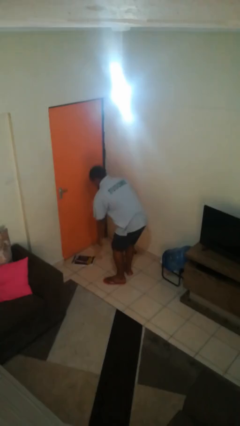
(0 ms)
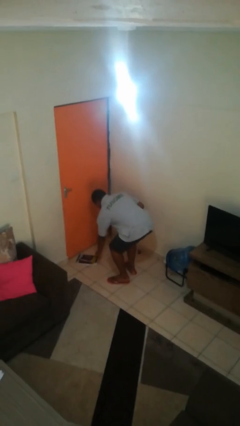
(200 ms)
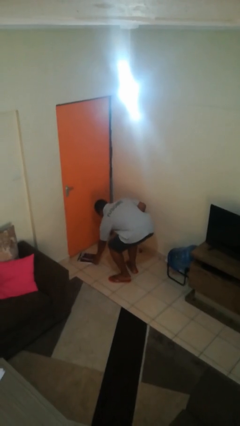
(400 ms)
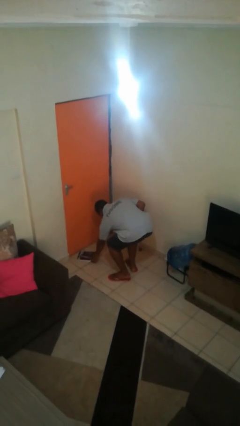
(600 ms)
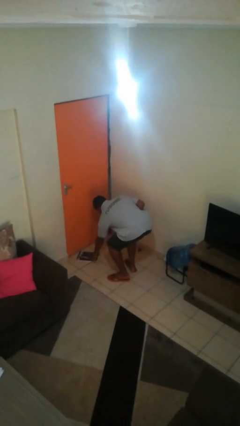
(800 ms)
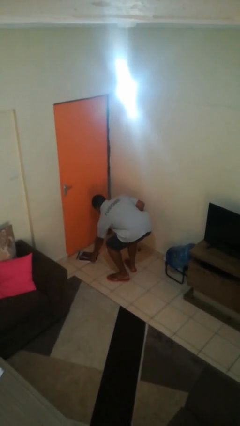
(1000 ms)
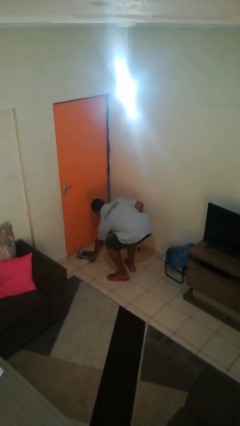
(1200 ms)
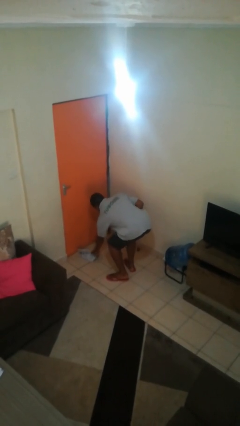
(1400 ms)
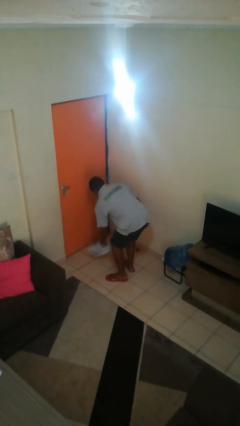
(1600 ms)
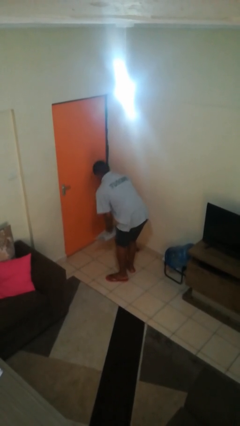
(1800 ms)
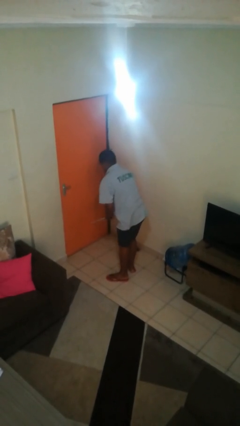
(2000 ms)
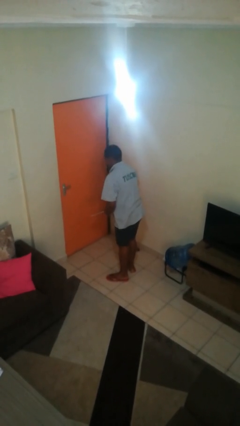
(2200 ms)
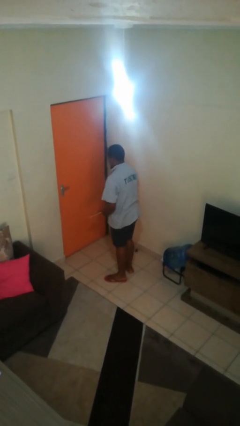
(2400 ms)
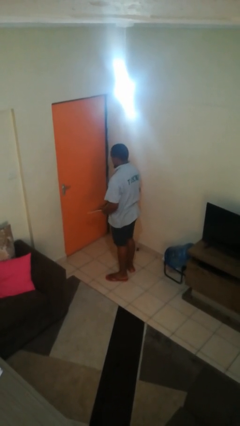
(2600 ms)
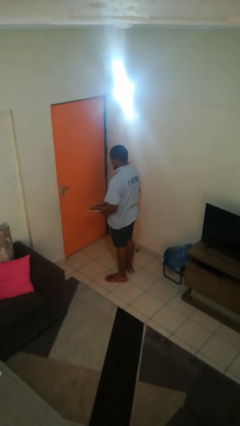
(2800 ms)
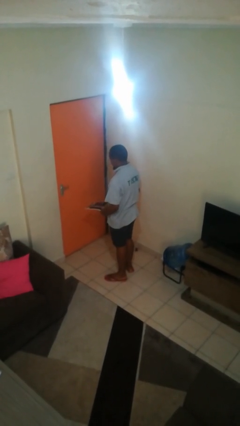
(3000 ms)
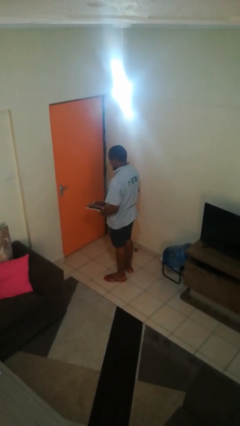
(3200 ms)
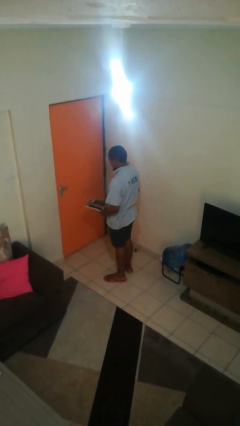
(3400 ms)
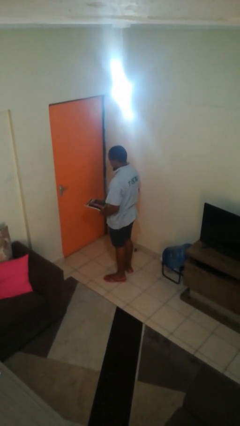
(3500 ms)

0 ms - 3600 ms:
person picks up object from floor

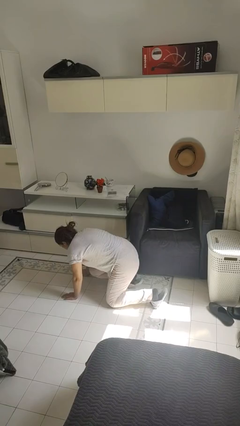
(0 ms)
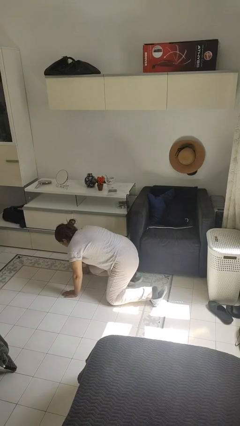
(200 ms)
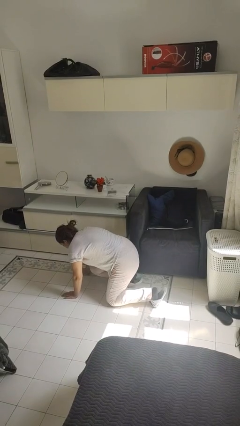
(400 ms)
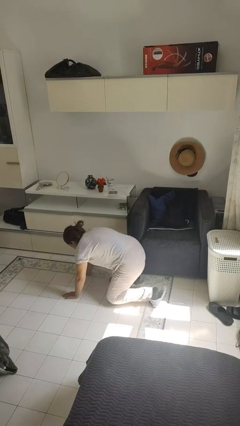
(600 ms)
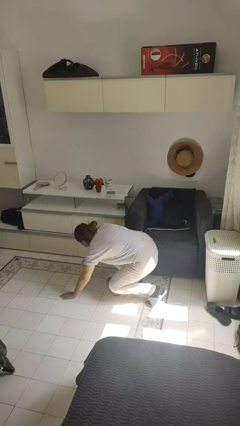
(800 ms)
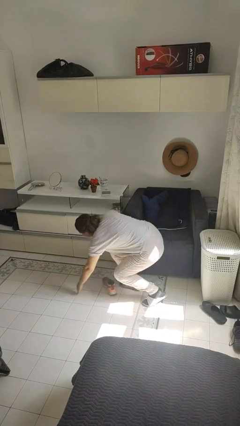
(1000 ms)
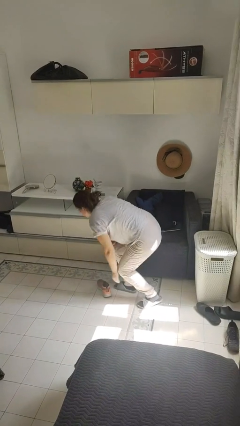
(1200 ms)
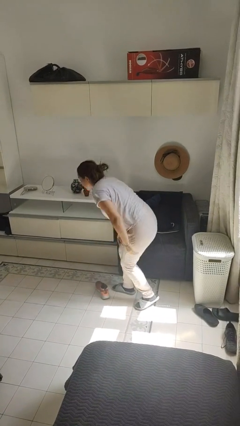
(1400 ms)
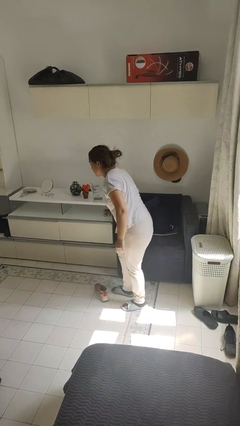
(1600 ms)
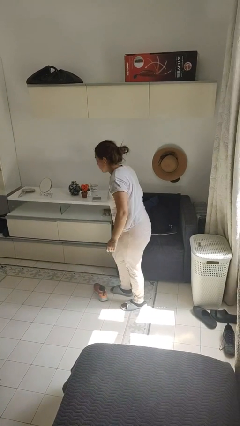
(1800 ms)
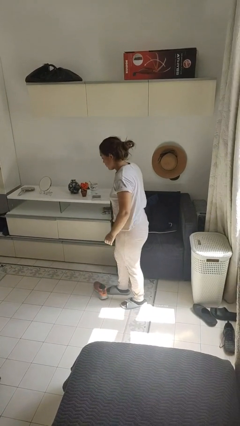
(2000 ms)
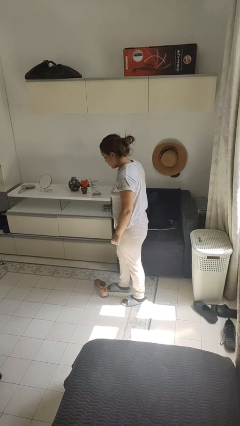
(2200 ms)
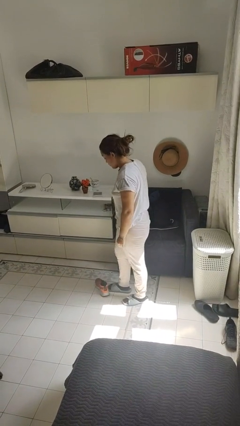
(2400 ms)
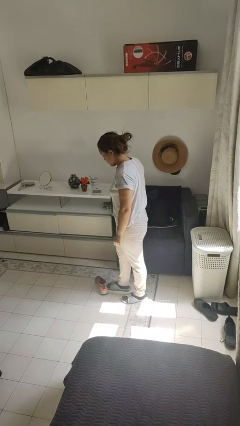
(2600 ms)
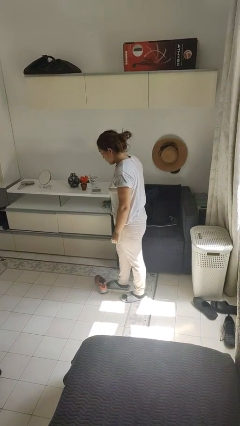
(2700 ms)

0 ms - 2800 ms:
person stands up from floor

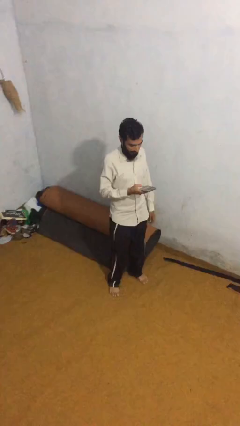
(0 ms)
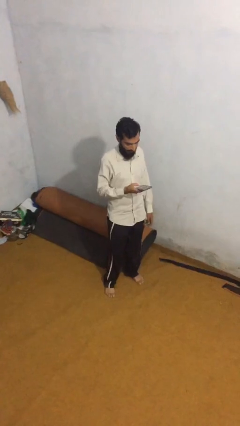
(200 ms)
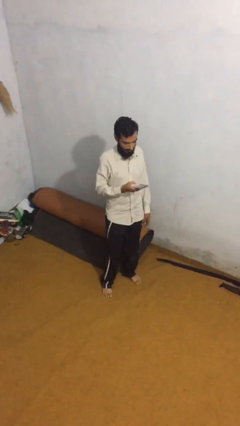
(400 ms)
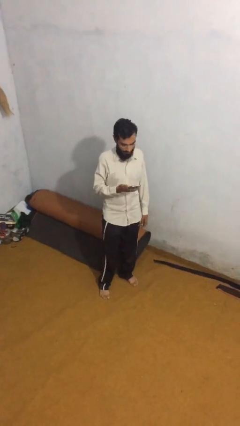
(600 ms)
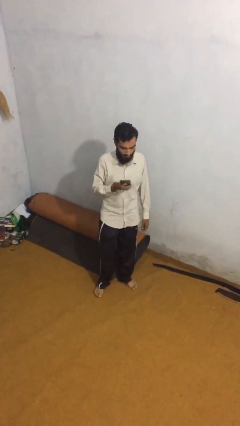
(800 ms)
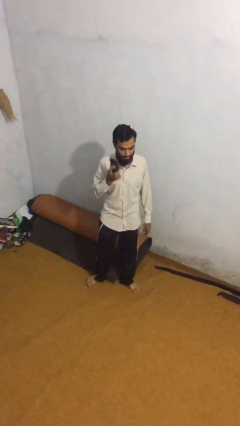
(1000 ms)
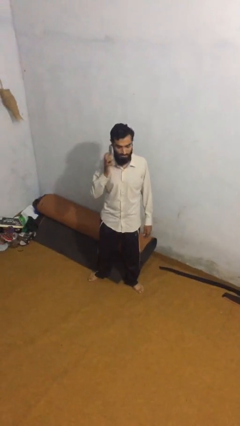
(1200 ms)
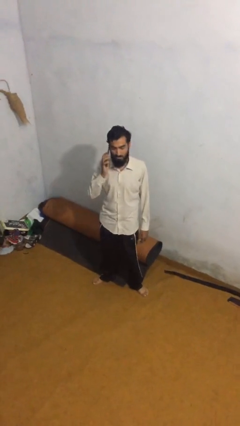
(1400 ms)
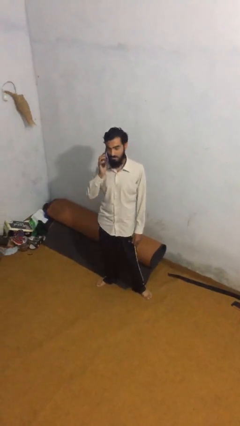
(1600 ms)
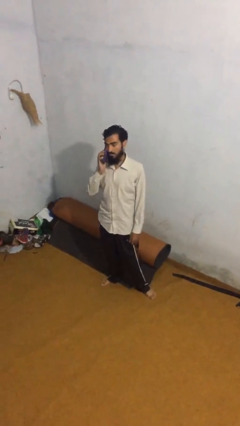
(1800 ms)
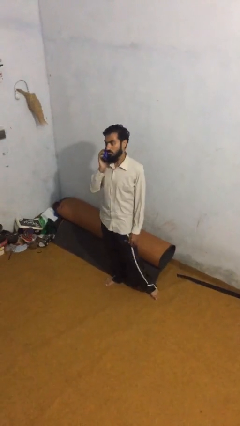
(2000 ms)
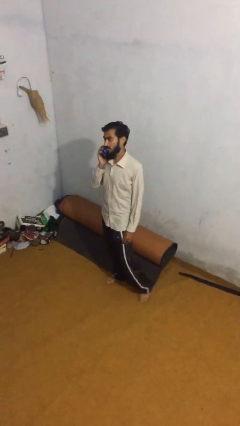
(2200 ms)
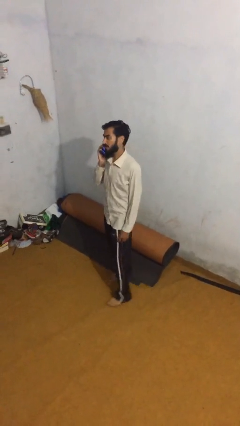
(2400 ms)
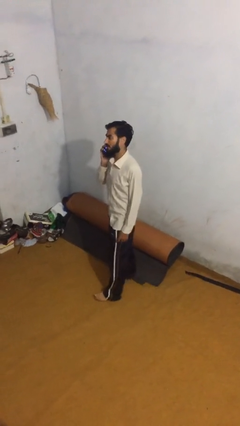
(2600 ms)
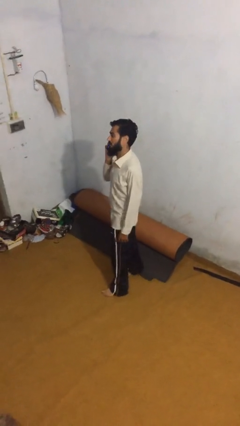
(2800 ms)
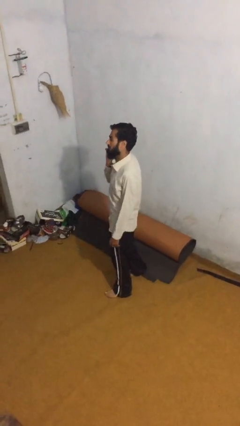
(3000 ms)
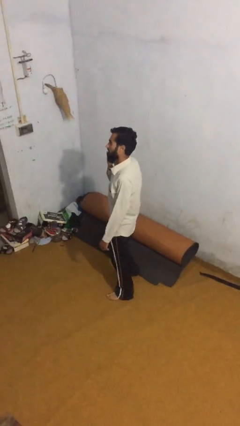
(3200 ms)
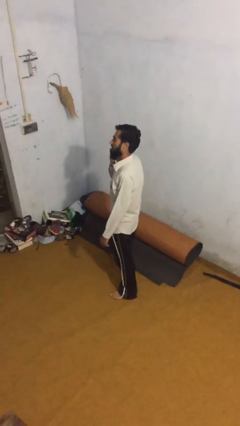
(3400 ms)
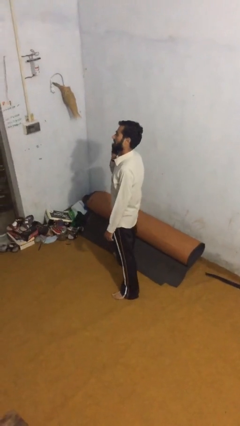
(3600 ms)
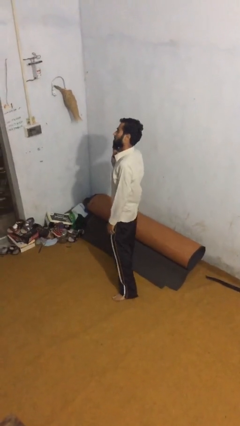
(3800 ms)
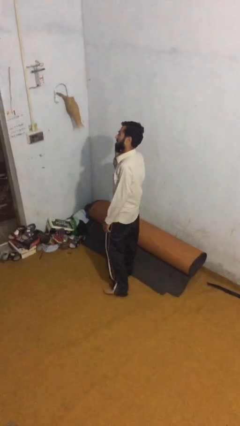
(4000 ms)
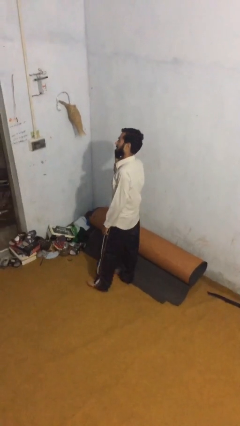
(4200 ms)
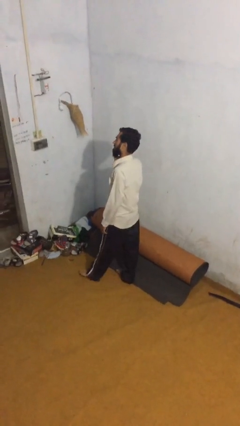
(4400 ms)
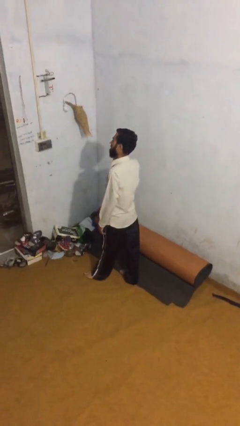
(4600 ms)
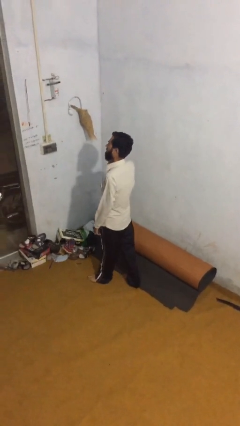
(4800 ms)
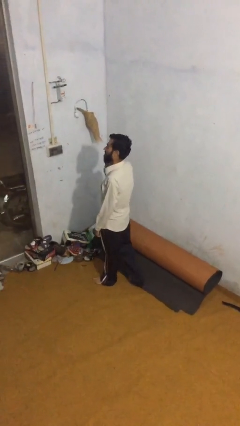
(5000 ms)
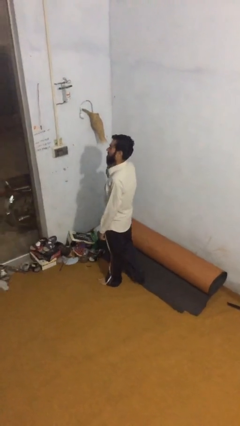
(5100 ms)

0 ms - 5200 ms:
person talks on phone

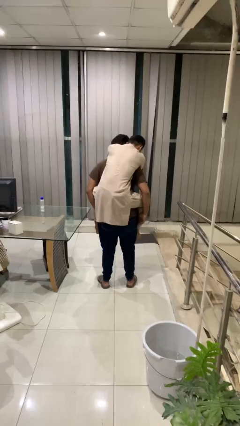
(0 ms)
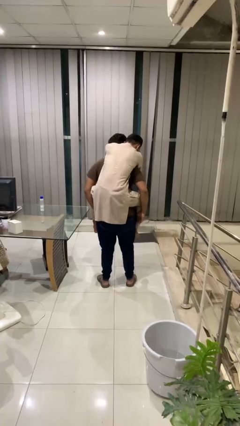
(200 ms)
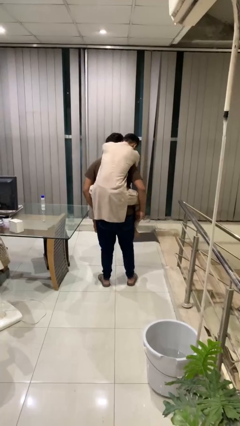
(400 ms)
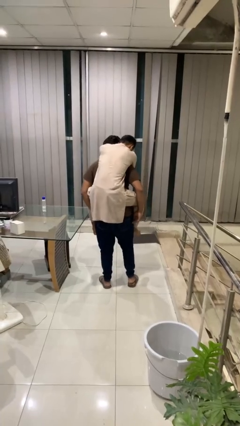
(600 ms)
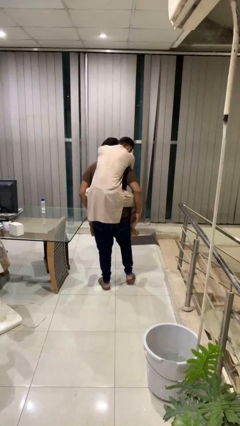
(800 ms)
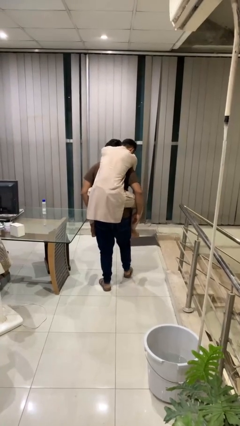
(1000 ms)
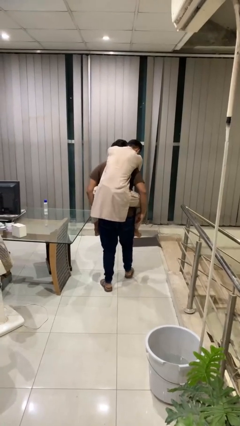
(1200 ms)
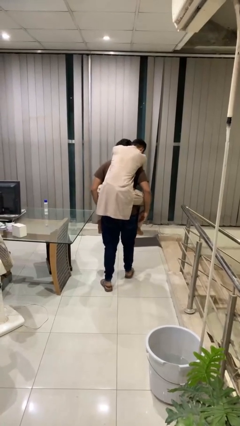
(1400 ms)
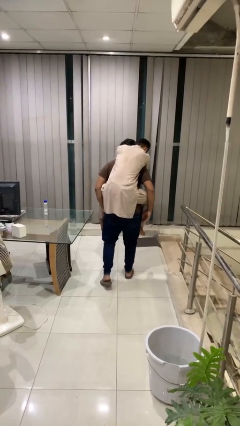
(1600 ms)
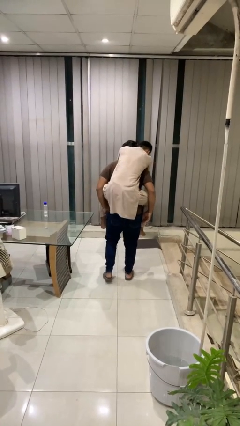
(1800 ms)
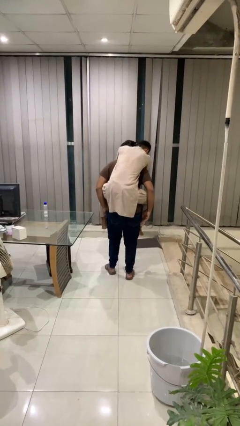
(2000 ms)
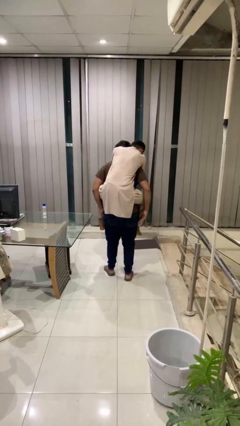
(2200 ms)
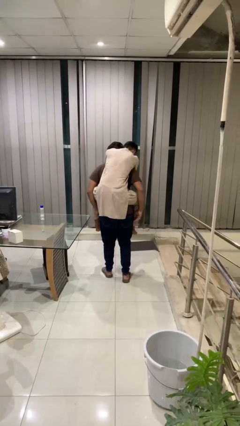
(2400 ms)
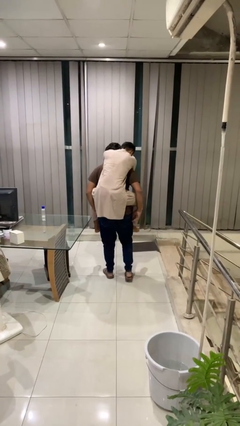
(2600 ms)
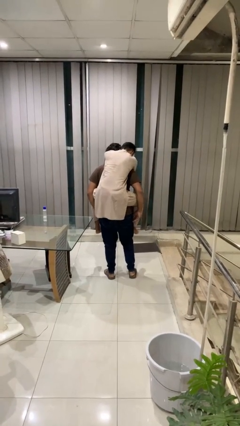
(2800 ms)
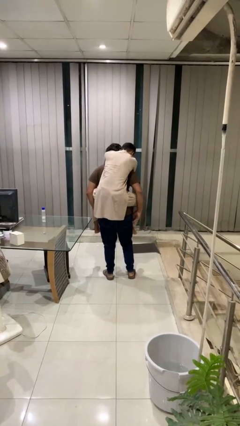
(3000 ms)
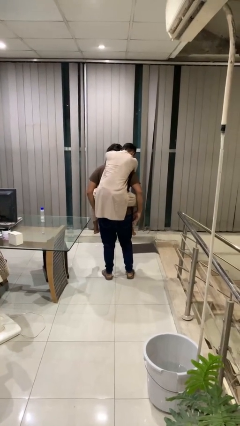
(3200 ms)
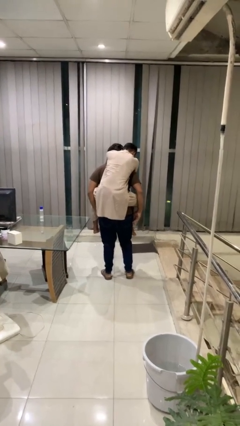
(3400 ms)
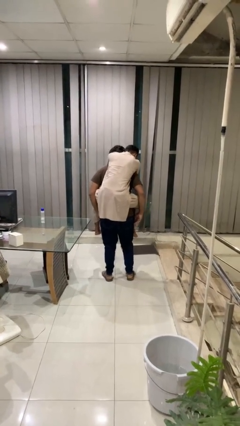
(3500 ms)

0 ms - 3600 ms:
person carries person on back

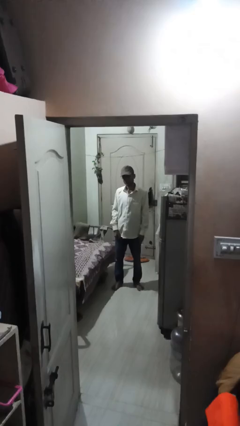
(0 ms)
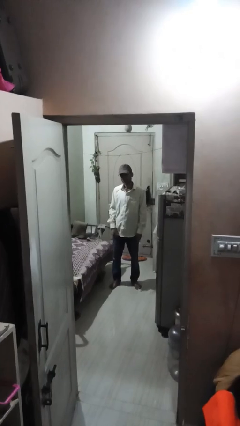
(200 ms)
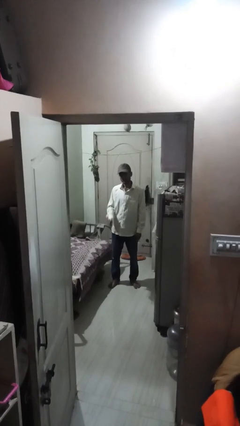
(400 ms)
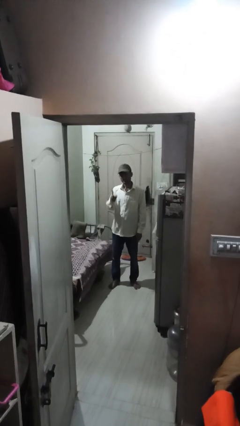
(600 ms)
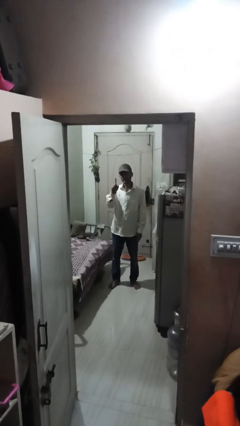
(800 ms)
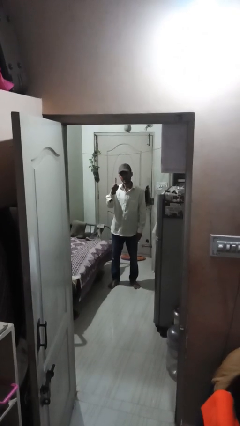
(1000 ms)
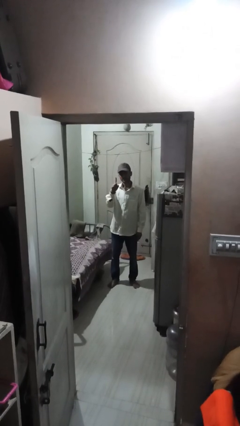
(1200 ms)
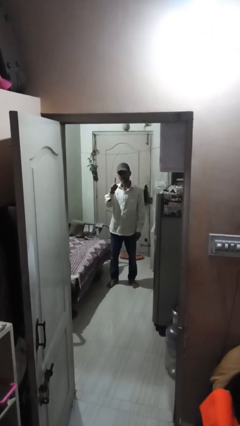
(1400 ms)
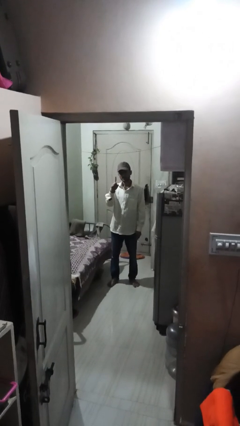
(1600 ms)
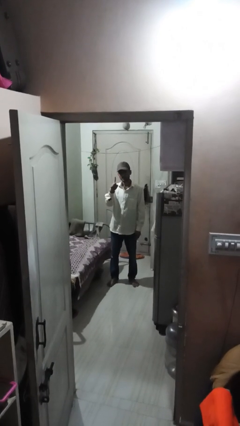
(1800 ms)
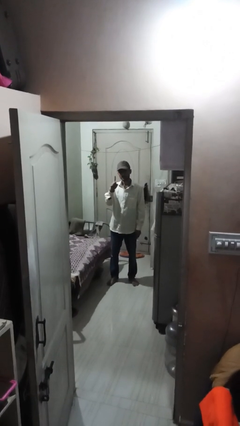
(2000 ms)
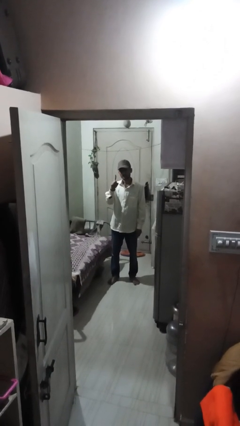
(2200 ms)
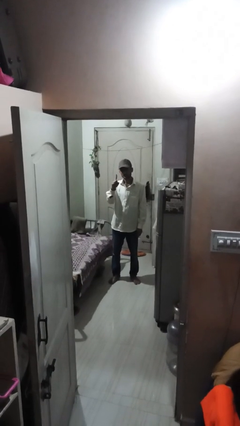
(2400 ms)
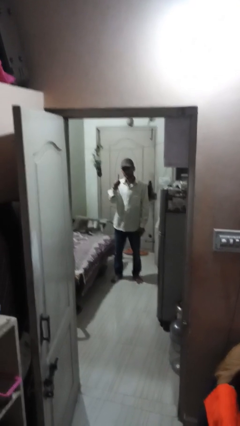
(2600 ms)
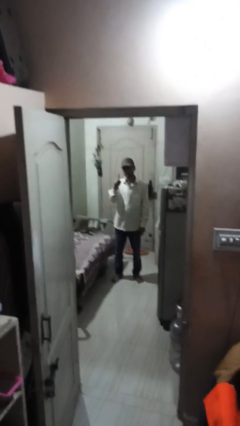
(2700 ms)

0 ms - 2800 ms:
person gestures number one
